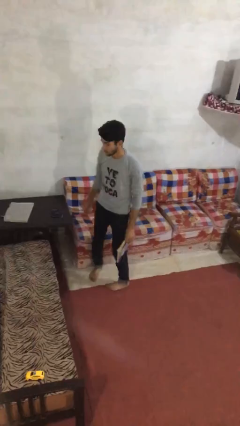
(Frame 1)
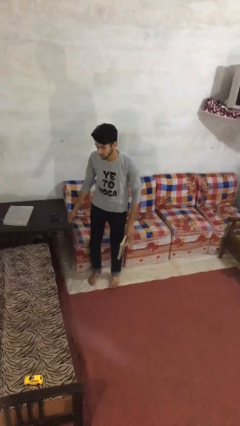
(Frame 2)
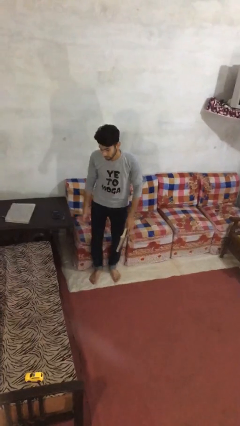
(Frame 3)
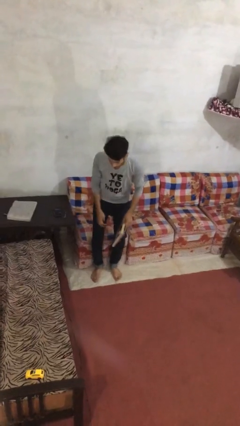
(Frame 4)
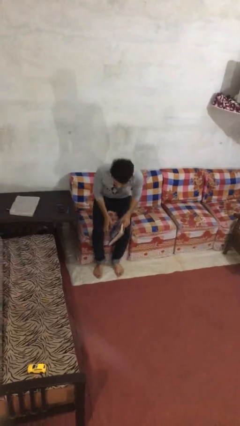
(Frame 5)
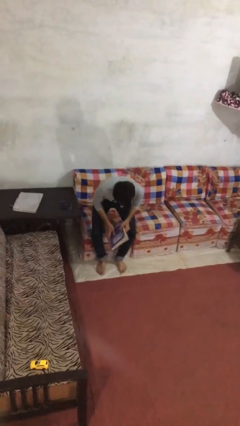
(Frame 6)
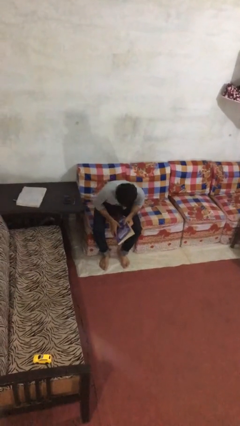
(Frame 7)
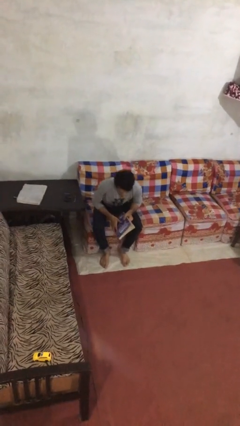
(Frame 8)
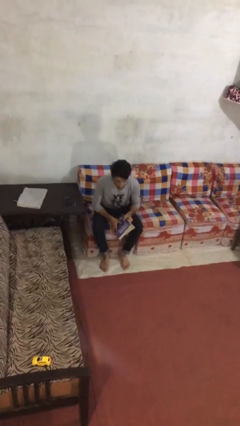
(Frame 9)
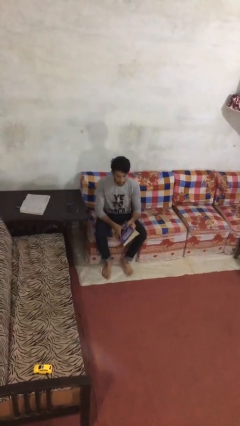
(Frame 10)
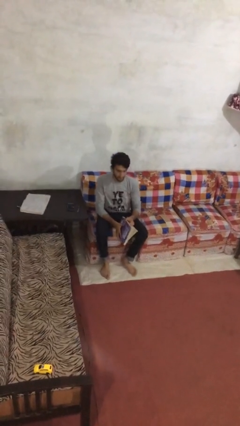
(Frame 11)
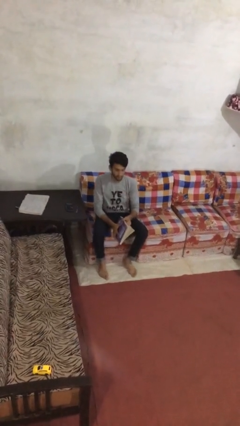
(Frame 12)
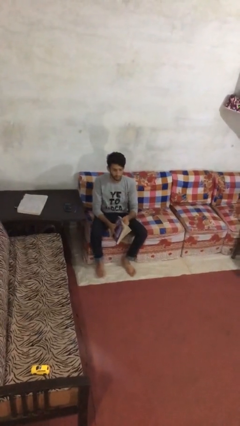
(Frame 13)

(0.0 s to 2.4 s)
person sits down

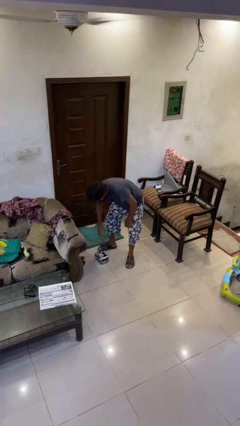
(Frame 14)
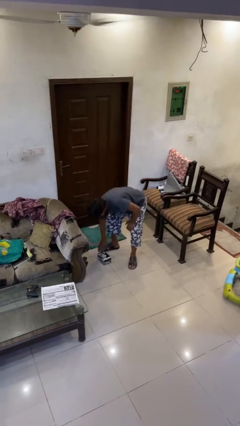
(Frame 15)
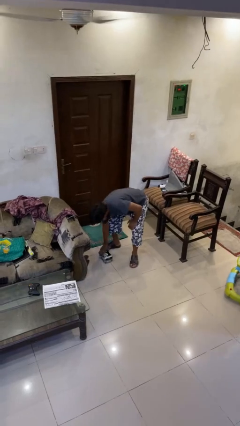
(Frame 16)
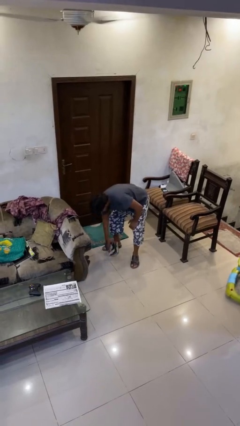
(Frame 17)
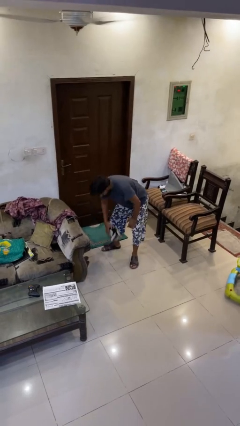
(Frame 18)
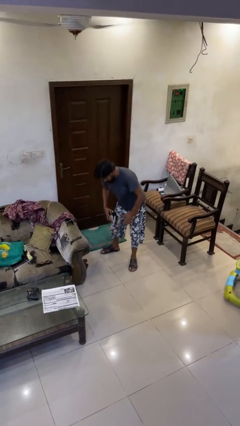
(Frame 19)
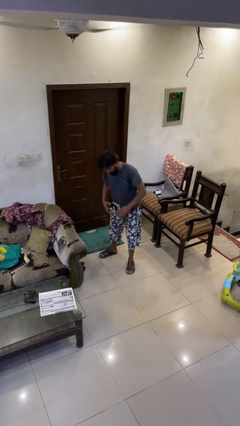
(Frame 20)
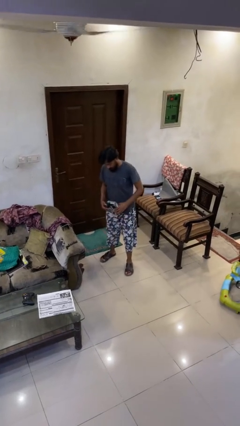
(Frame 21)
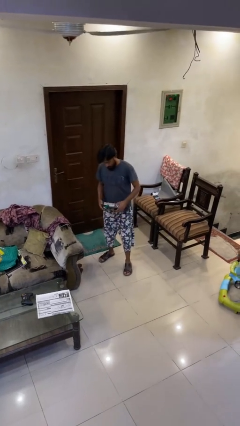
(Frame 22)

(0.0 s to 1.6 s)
person picks up object from floor

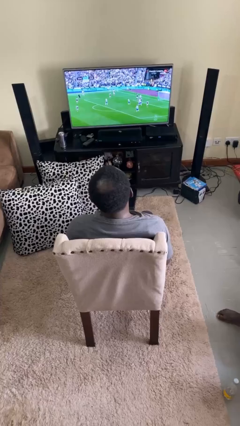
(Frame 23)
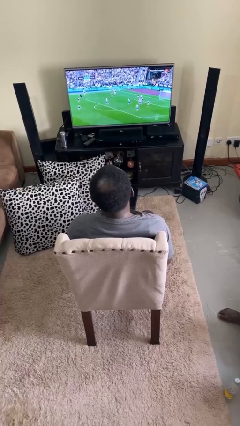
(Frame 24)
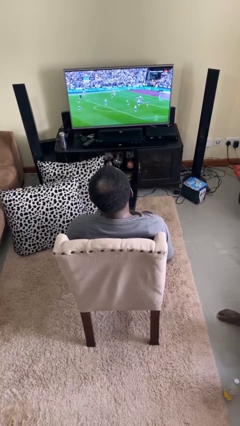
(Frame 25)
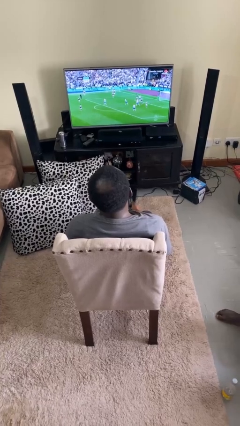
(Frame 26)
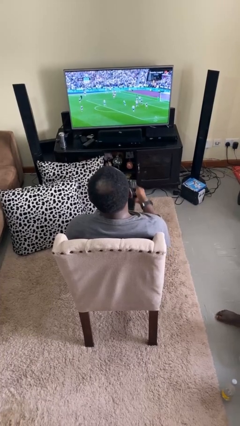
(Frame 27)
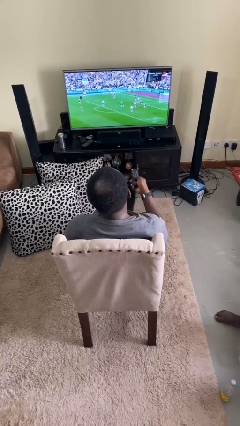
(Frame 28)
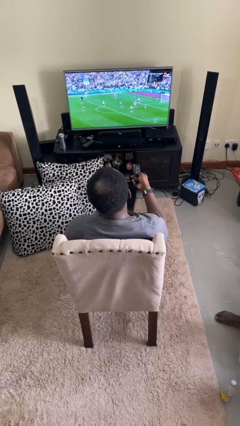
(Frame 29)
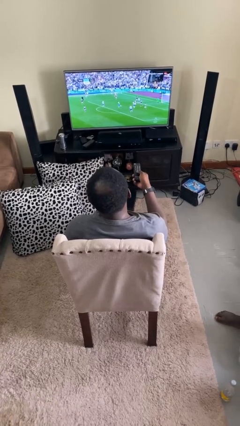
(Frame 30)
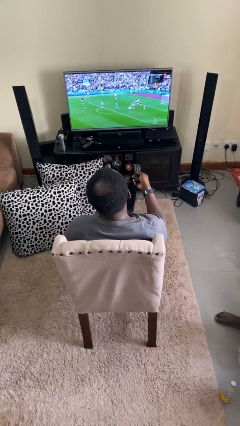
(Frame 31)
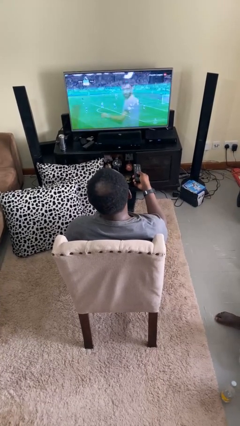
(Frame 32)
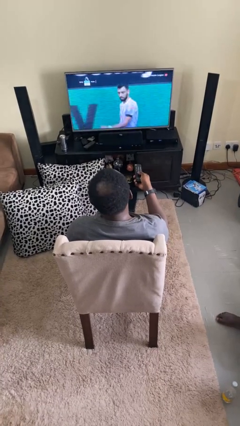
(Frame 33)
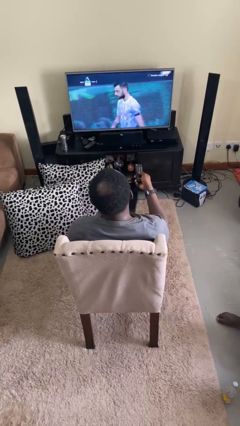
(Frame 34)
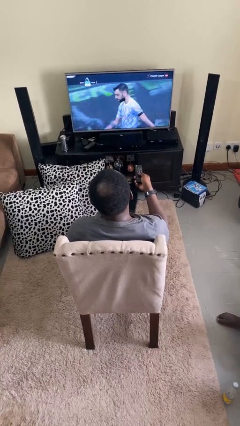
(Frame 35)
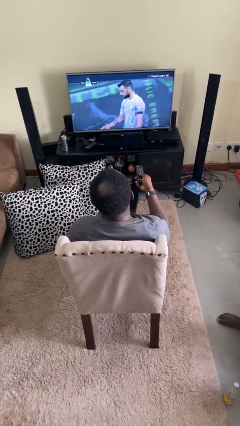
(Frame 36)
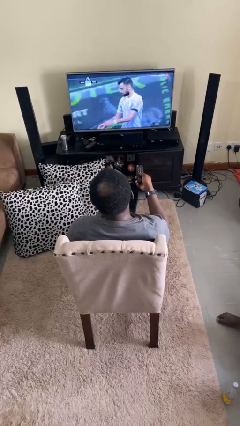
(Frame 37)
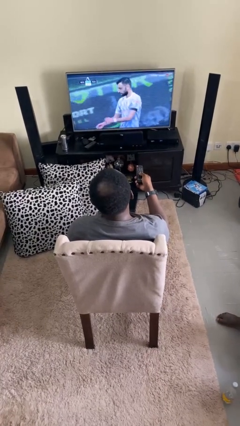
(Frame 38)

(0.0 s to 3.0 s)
person uses television remote

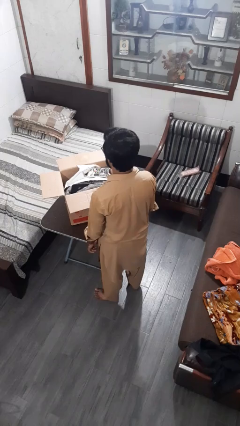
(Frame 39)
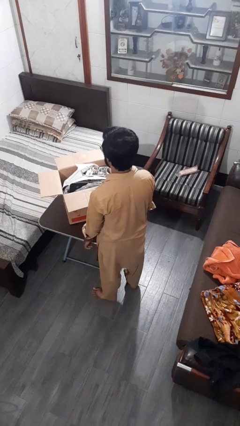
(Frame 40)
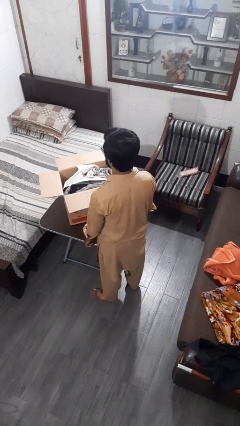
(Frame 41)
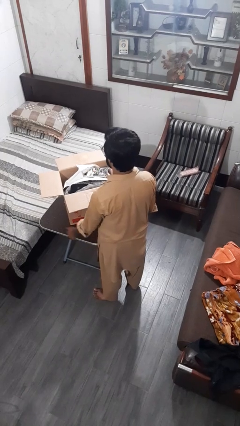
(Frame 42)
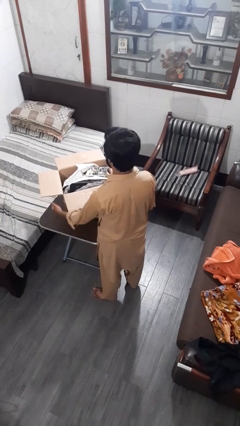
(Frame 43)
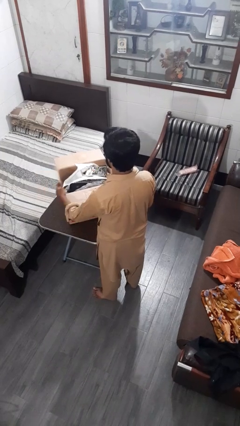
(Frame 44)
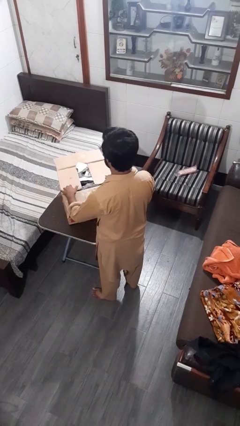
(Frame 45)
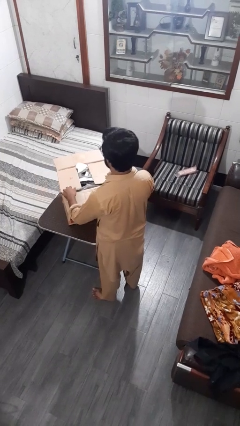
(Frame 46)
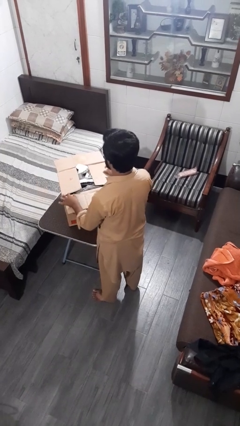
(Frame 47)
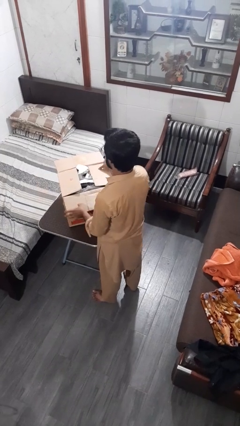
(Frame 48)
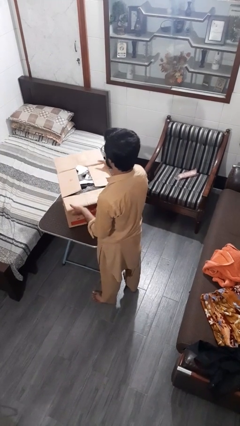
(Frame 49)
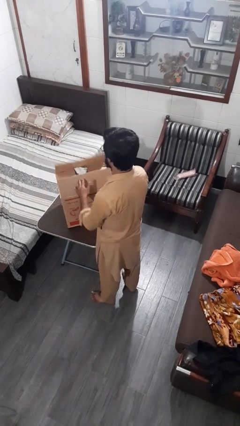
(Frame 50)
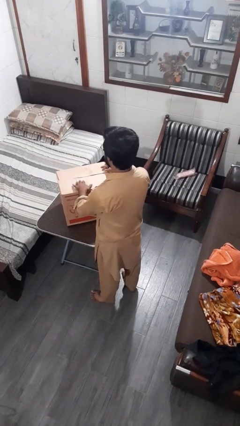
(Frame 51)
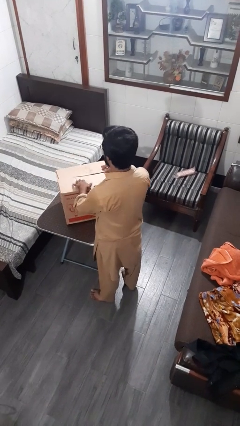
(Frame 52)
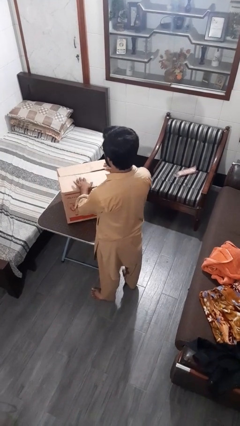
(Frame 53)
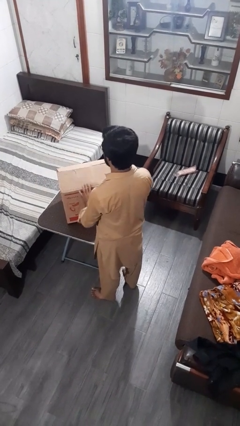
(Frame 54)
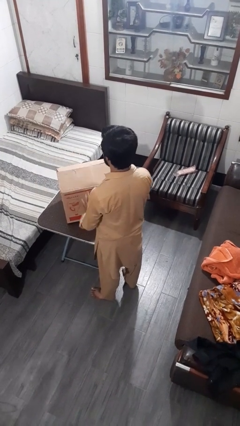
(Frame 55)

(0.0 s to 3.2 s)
person closes box

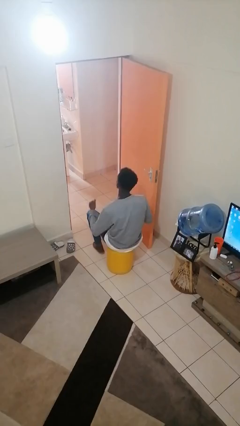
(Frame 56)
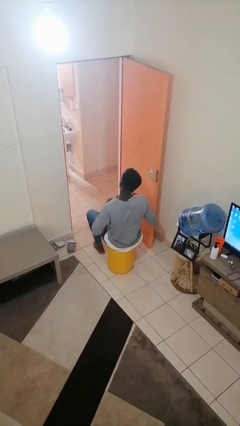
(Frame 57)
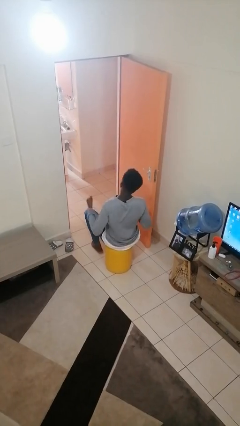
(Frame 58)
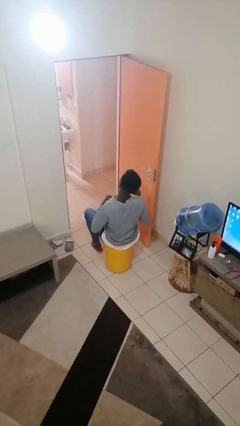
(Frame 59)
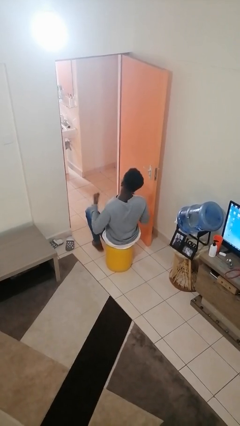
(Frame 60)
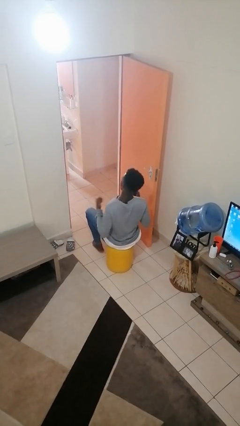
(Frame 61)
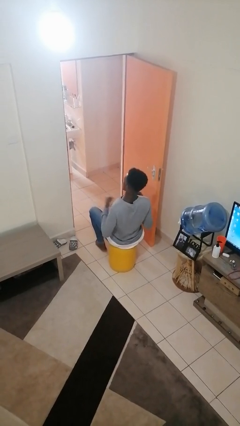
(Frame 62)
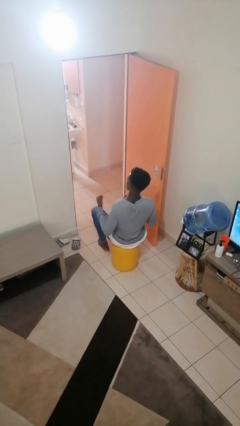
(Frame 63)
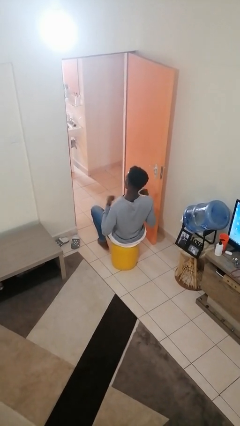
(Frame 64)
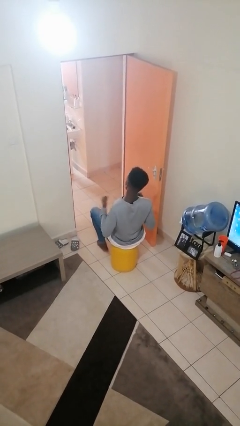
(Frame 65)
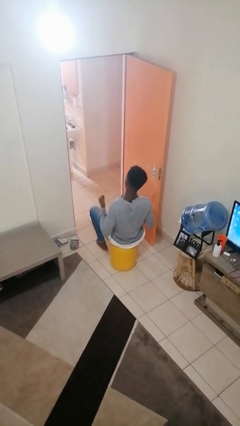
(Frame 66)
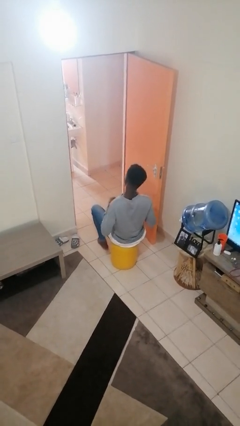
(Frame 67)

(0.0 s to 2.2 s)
person drums on chest

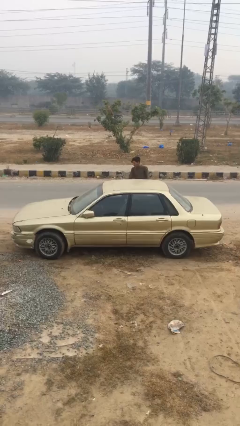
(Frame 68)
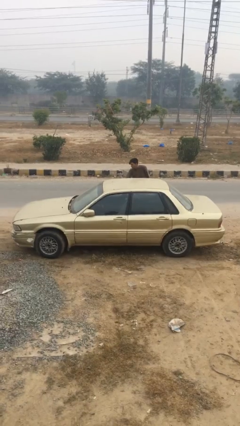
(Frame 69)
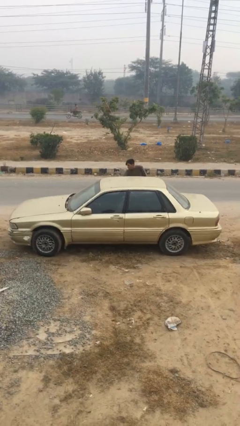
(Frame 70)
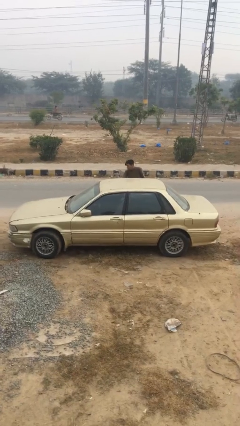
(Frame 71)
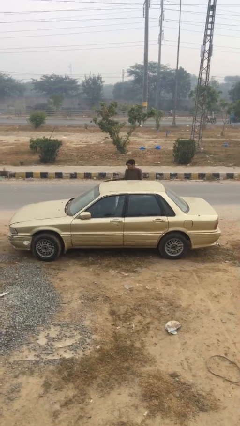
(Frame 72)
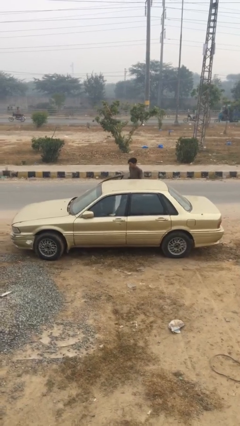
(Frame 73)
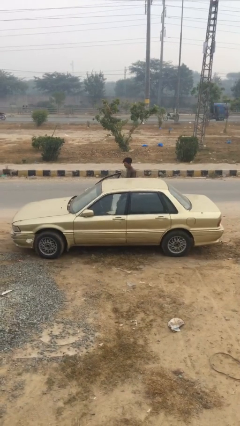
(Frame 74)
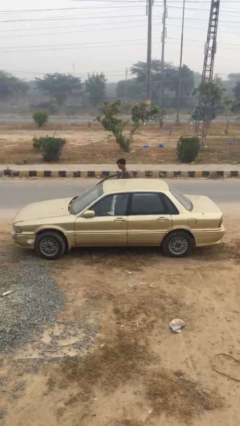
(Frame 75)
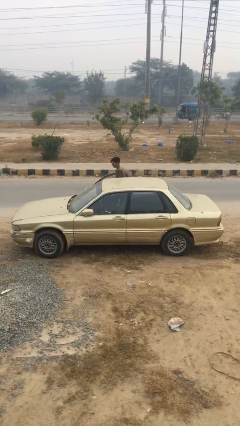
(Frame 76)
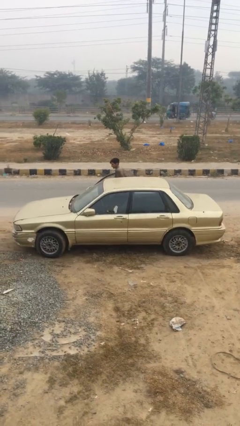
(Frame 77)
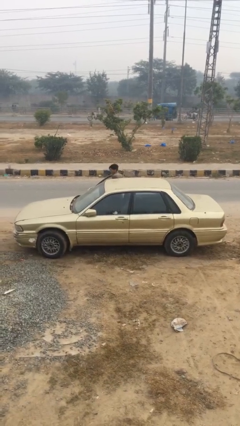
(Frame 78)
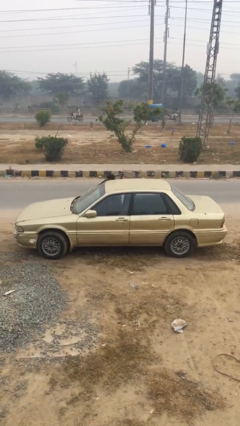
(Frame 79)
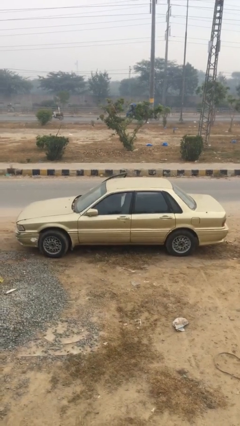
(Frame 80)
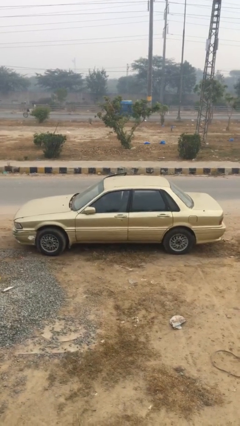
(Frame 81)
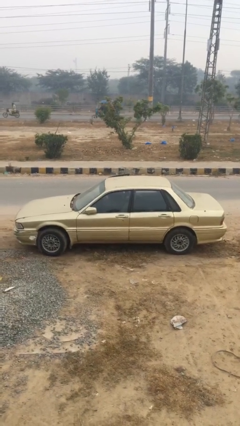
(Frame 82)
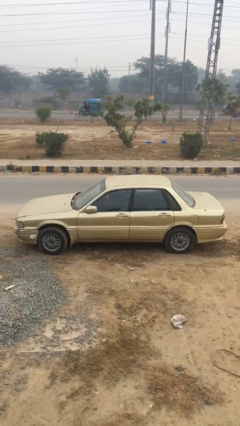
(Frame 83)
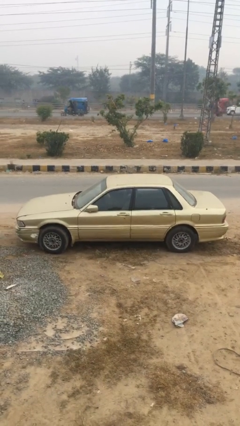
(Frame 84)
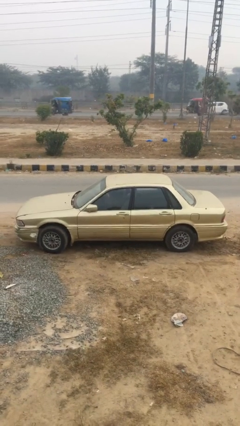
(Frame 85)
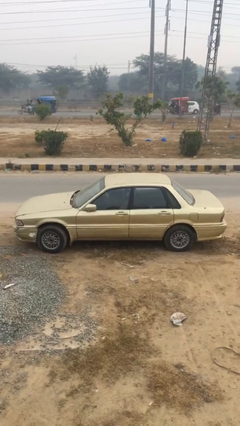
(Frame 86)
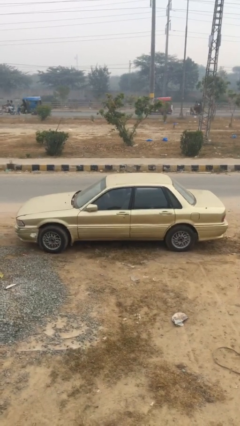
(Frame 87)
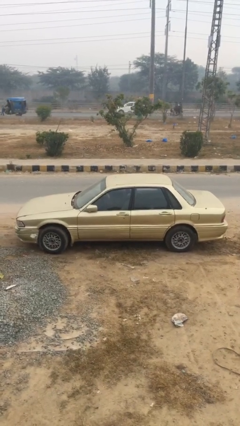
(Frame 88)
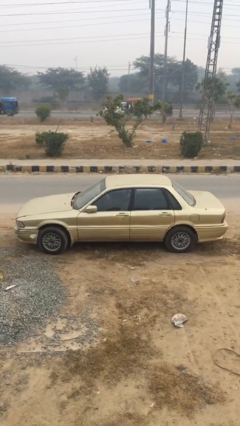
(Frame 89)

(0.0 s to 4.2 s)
car picks up person

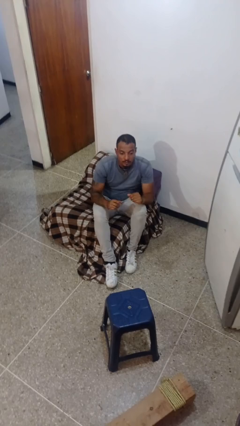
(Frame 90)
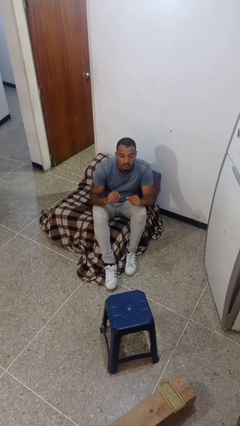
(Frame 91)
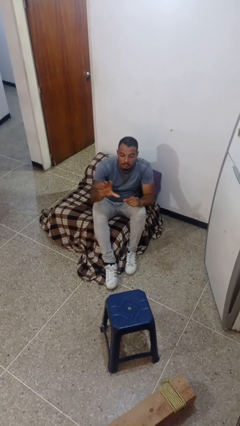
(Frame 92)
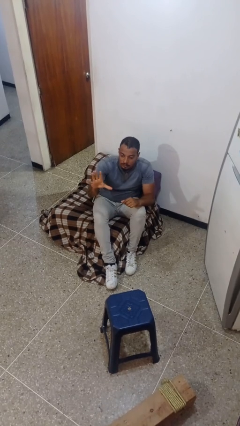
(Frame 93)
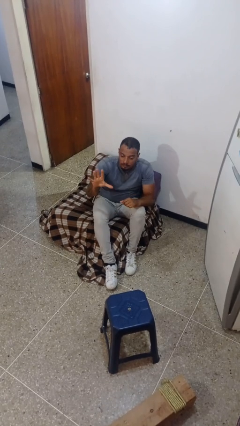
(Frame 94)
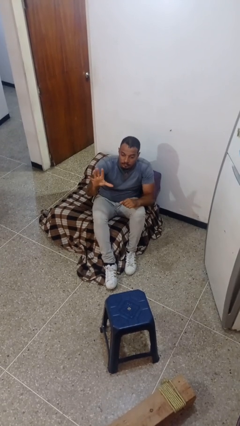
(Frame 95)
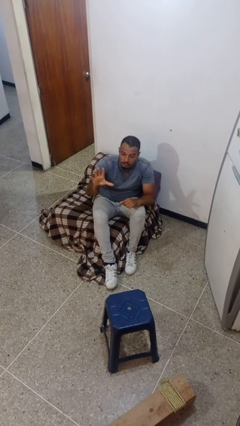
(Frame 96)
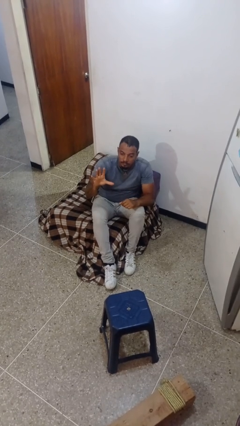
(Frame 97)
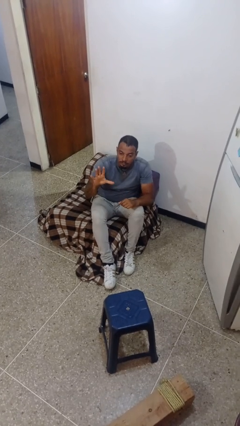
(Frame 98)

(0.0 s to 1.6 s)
person gestures zoom in
